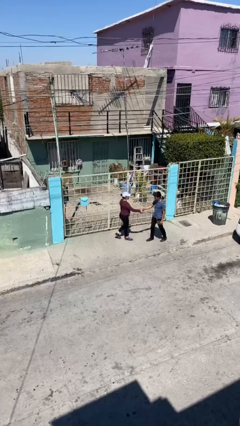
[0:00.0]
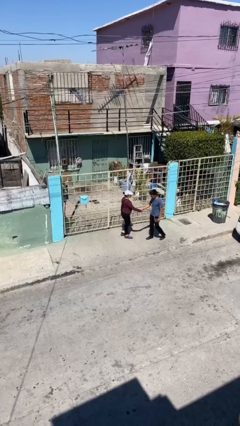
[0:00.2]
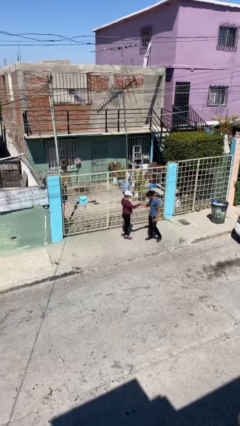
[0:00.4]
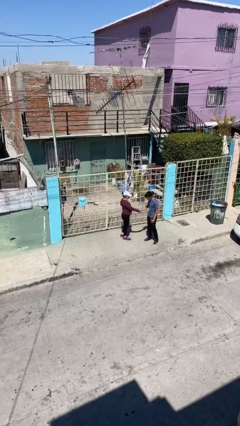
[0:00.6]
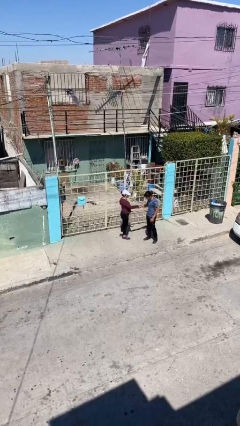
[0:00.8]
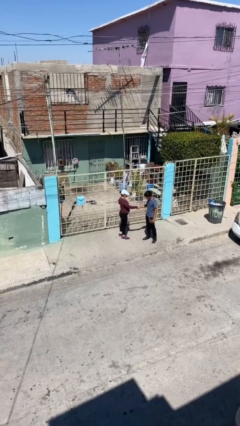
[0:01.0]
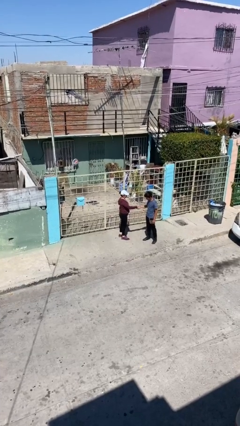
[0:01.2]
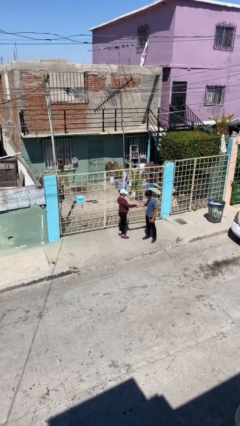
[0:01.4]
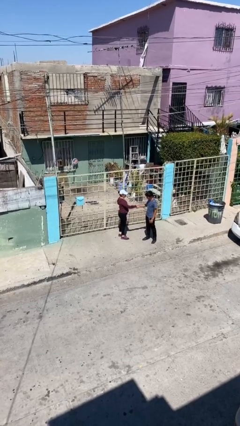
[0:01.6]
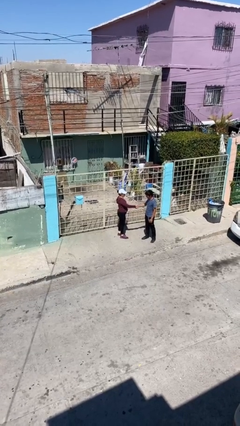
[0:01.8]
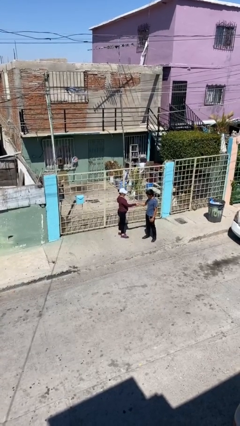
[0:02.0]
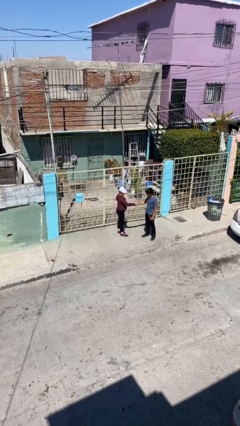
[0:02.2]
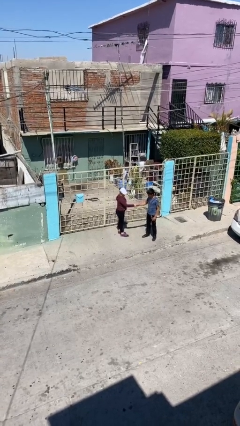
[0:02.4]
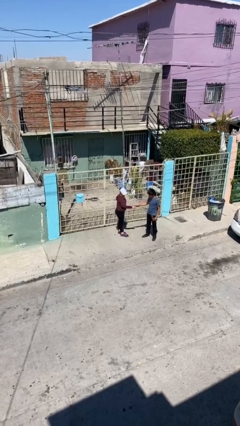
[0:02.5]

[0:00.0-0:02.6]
person shakes hand

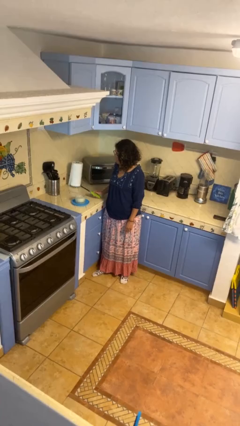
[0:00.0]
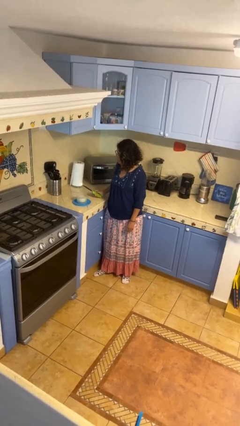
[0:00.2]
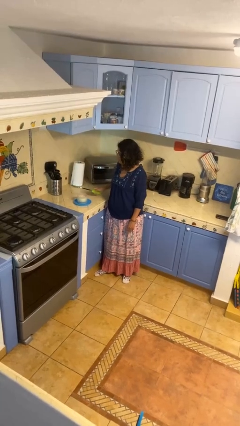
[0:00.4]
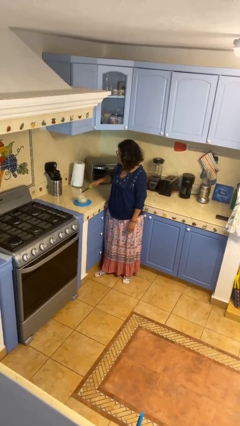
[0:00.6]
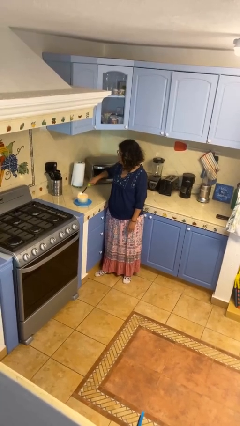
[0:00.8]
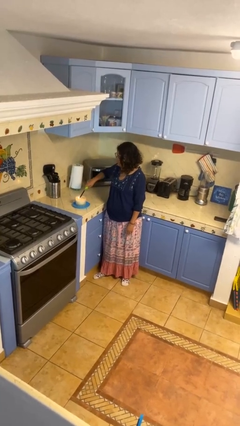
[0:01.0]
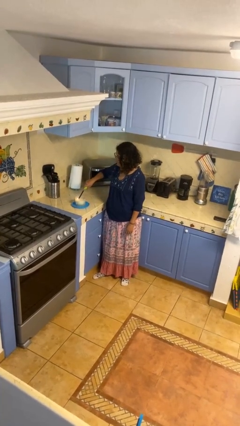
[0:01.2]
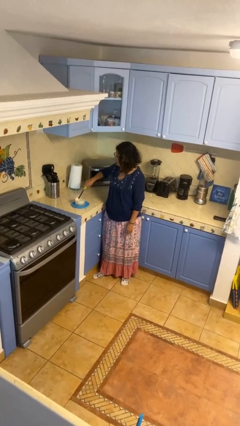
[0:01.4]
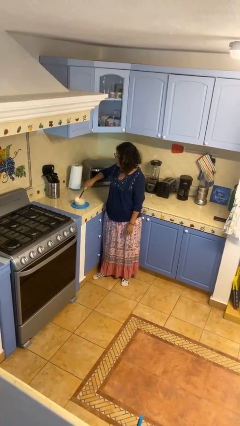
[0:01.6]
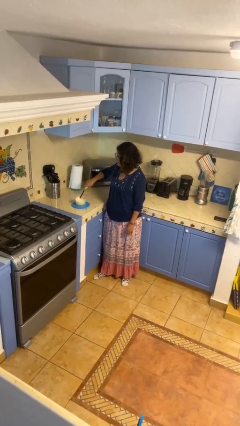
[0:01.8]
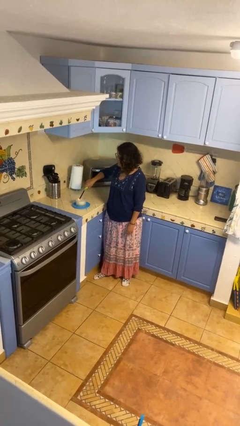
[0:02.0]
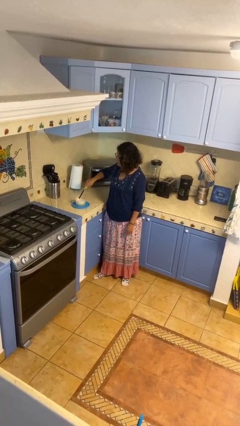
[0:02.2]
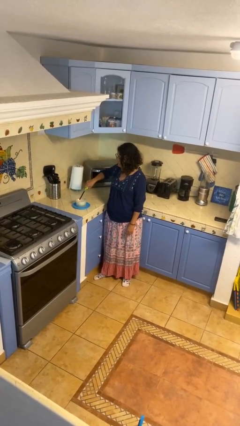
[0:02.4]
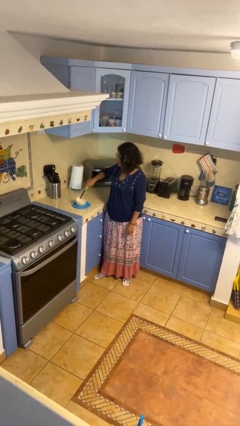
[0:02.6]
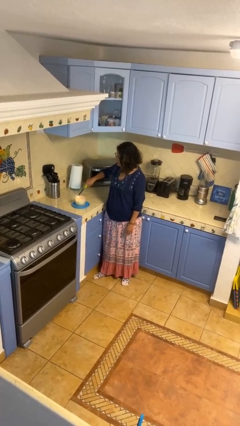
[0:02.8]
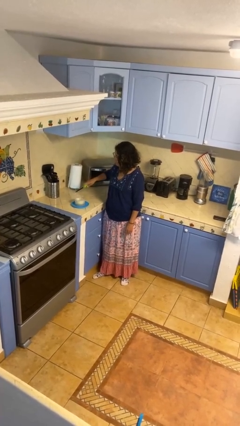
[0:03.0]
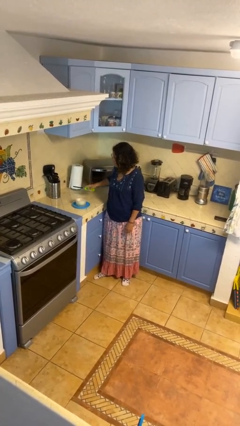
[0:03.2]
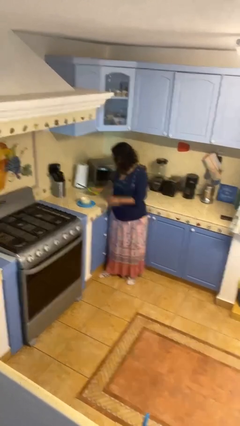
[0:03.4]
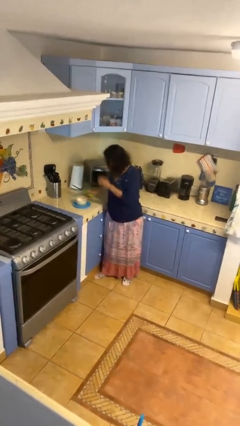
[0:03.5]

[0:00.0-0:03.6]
person lights candle

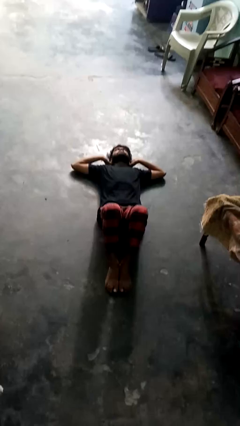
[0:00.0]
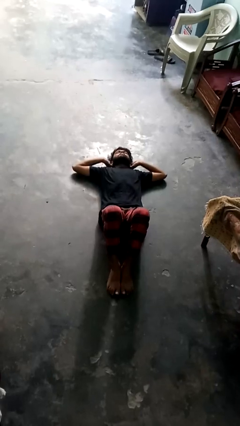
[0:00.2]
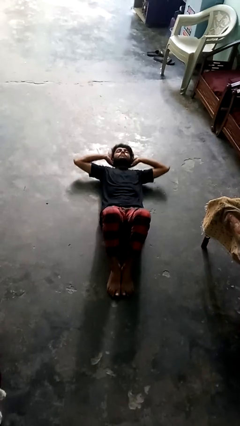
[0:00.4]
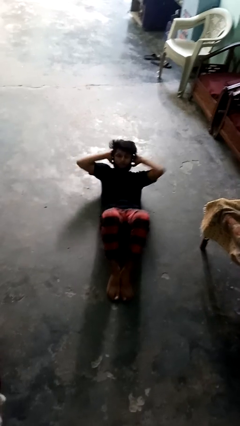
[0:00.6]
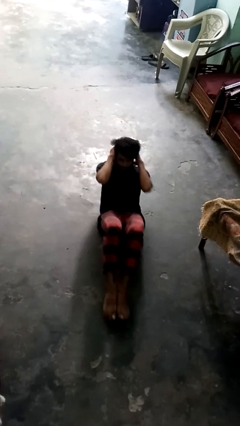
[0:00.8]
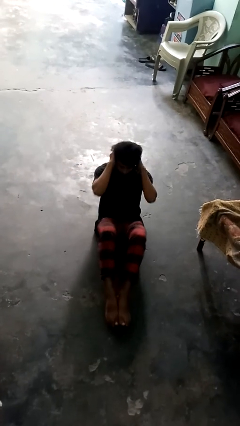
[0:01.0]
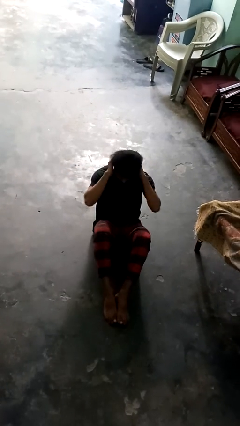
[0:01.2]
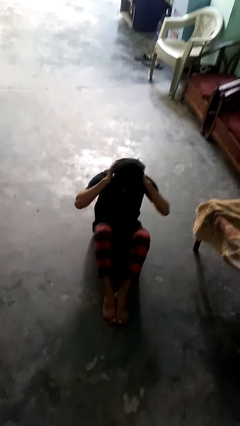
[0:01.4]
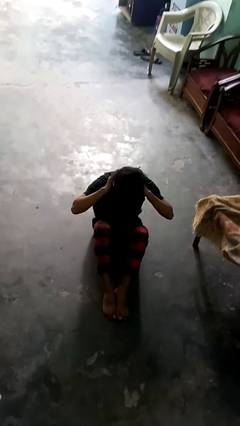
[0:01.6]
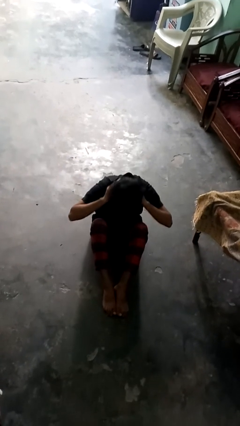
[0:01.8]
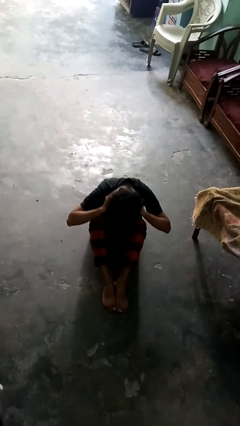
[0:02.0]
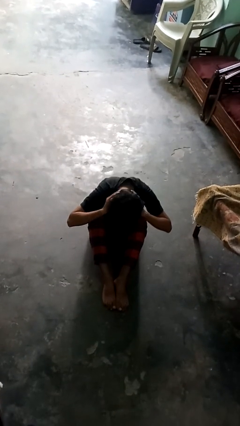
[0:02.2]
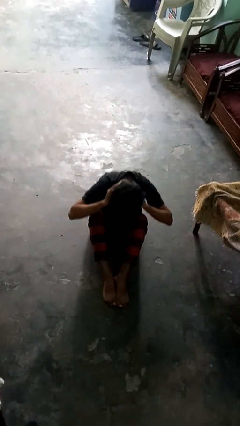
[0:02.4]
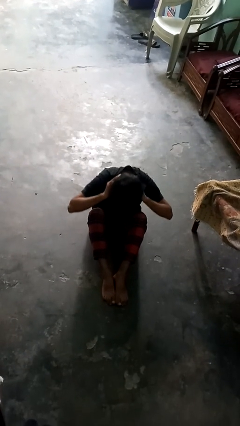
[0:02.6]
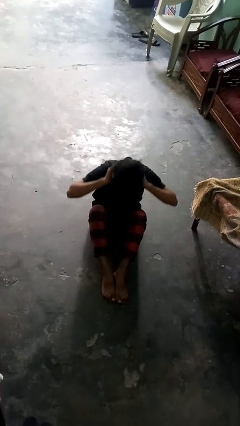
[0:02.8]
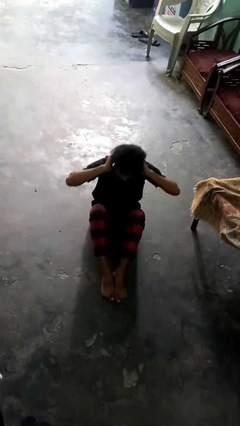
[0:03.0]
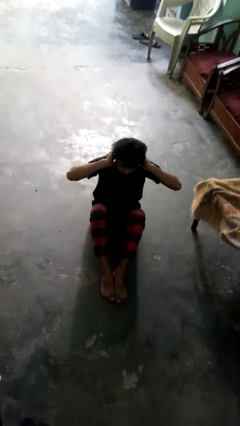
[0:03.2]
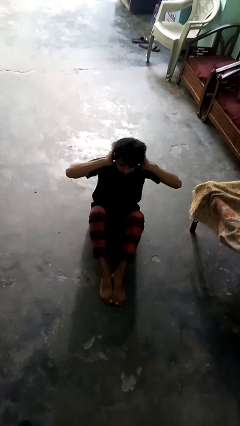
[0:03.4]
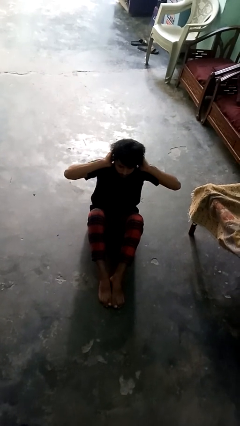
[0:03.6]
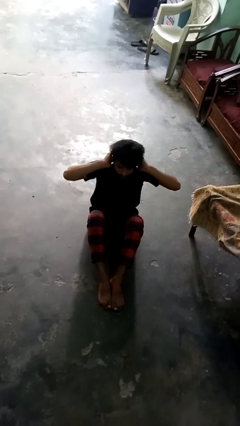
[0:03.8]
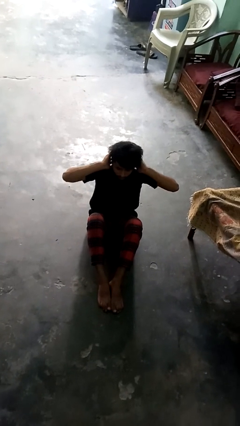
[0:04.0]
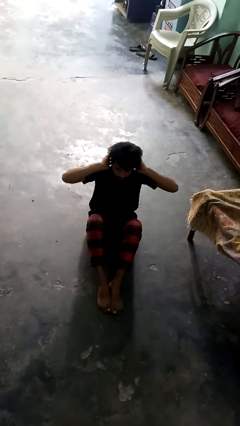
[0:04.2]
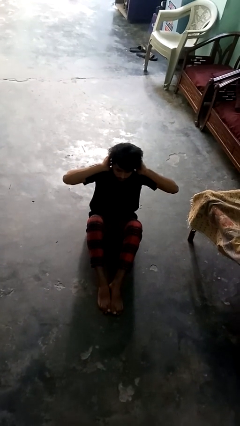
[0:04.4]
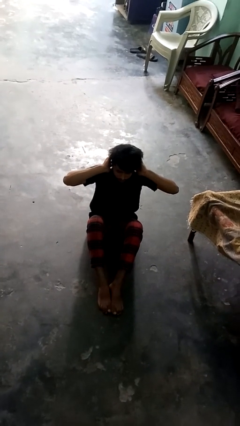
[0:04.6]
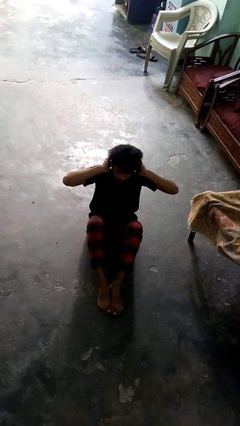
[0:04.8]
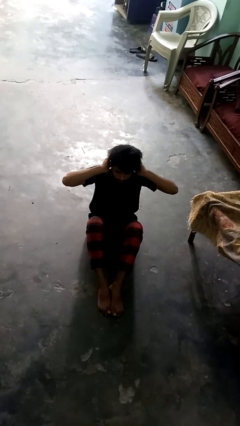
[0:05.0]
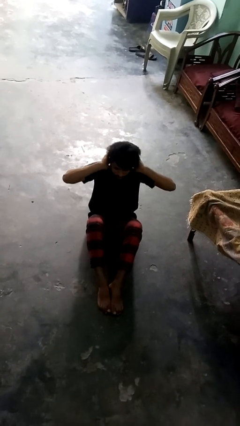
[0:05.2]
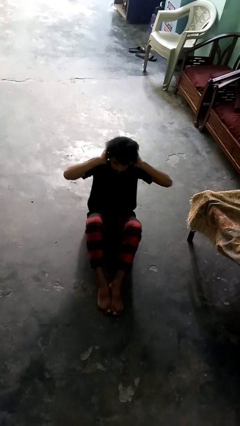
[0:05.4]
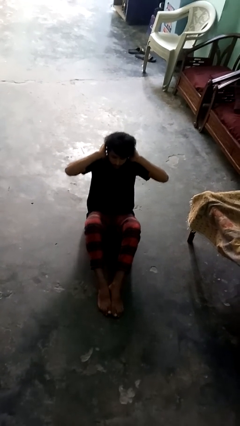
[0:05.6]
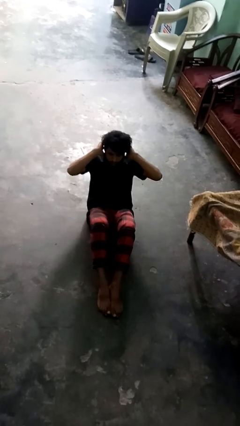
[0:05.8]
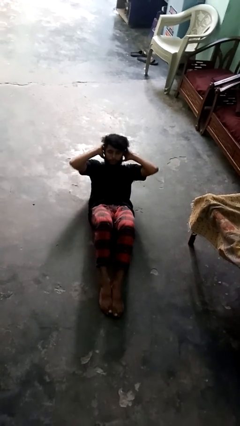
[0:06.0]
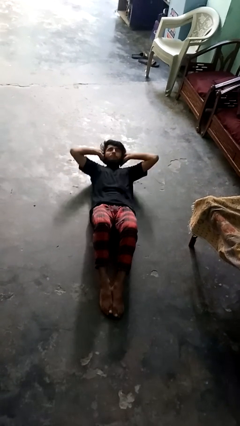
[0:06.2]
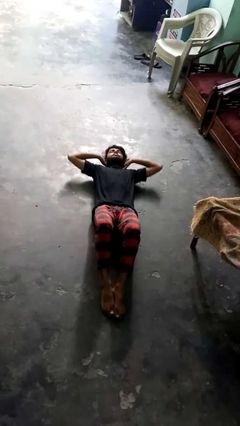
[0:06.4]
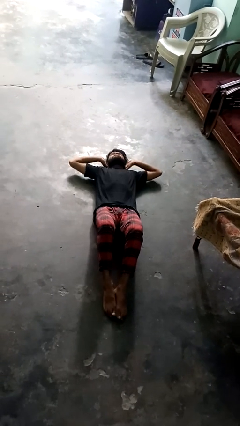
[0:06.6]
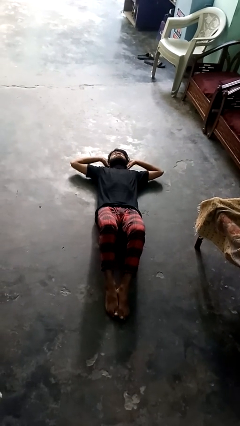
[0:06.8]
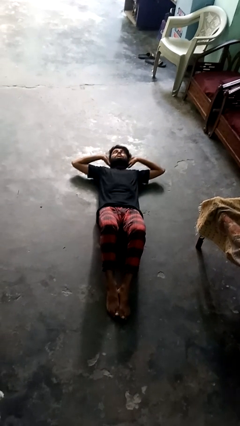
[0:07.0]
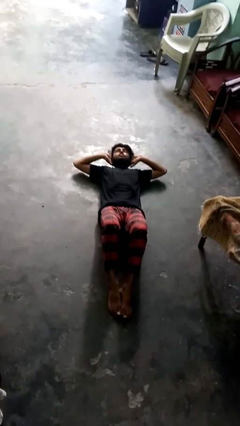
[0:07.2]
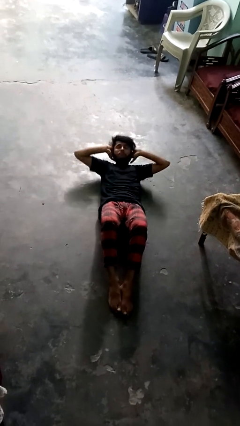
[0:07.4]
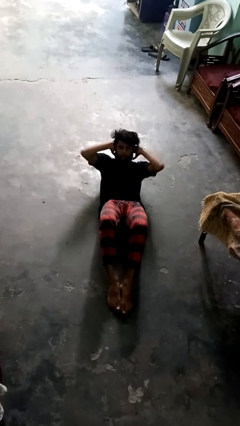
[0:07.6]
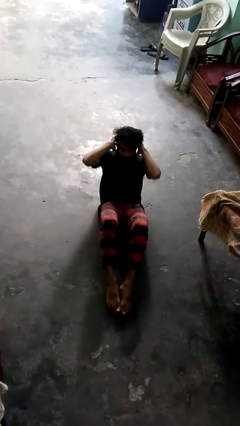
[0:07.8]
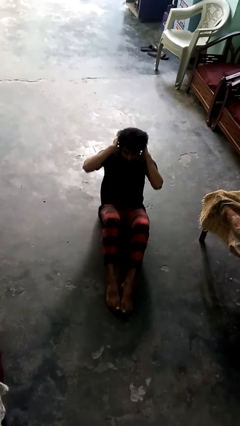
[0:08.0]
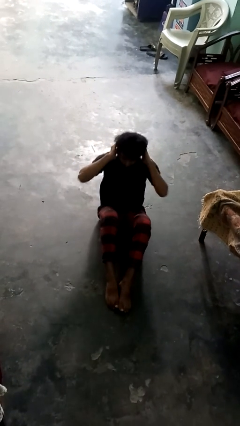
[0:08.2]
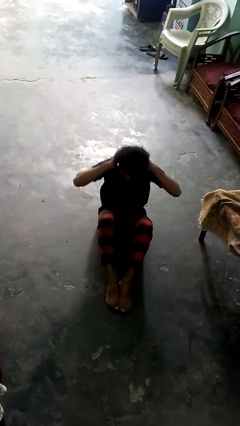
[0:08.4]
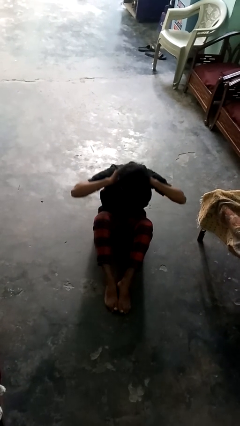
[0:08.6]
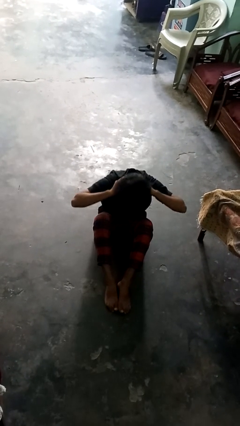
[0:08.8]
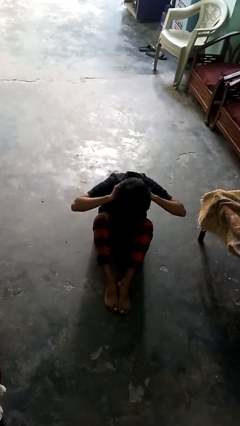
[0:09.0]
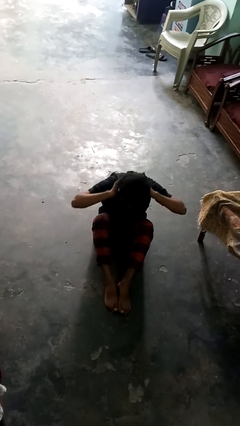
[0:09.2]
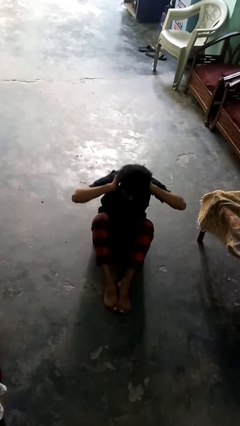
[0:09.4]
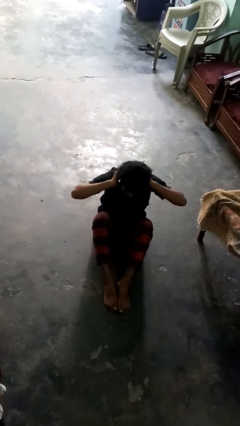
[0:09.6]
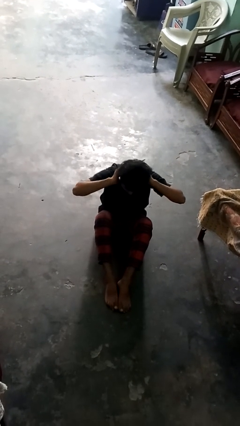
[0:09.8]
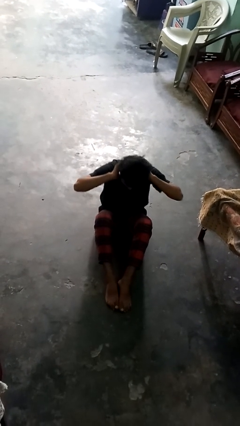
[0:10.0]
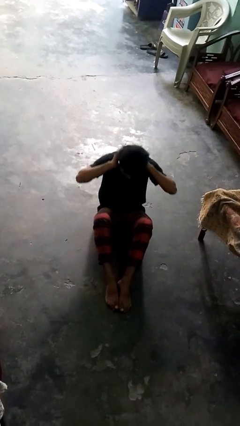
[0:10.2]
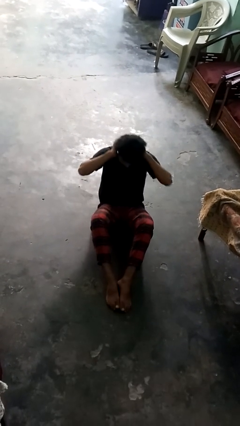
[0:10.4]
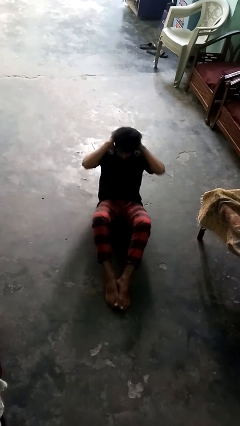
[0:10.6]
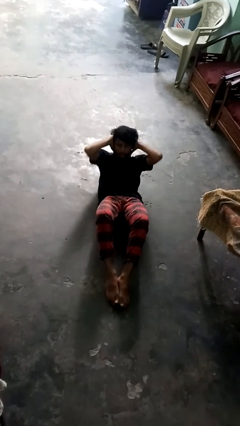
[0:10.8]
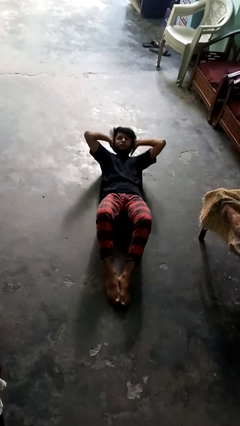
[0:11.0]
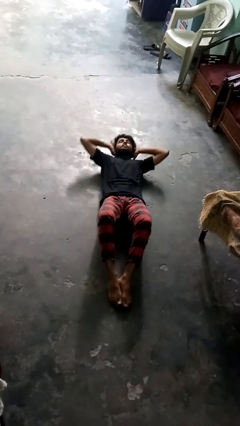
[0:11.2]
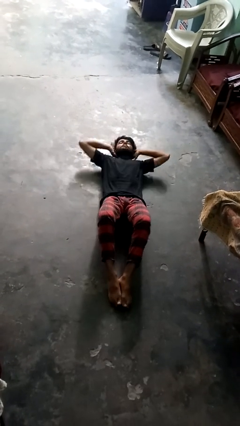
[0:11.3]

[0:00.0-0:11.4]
person exercises with situp

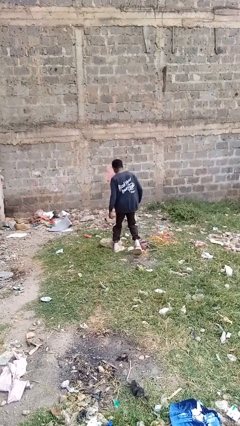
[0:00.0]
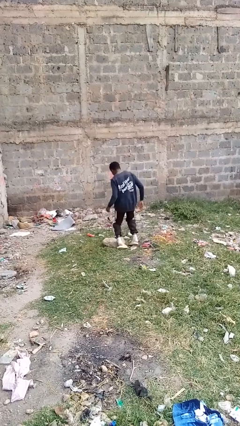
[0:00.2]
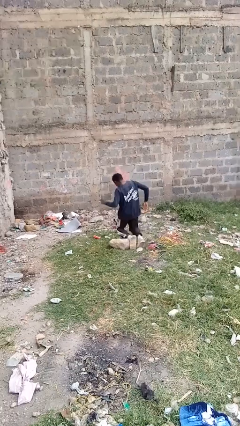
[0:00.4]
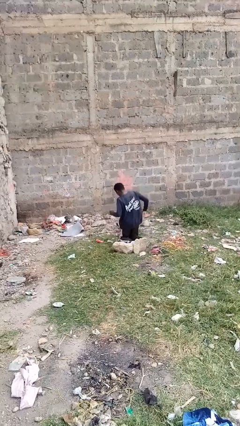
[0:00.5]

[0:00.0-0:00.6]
person trips on object on floor
